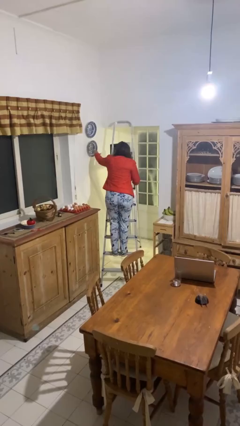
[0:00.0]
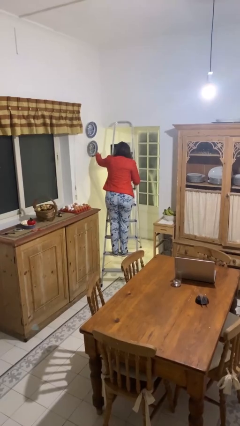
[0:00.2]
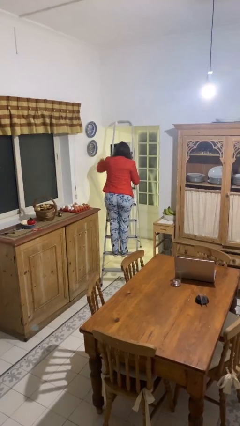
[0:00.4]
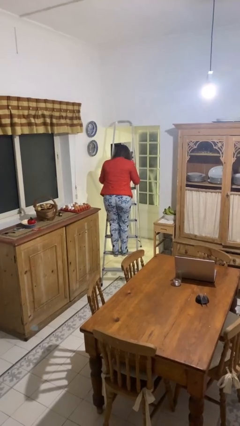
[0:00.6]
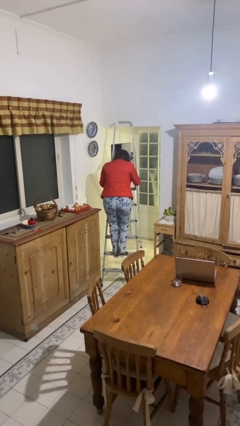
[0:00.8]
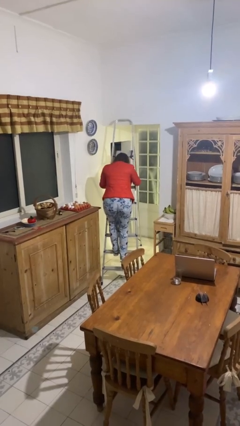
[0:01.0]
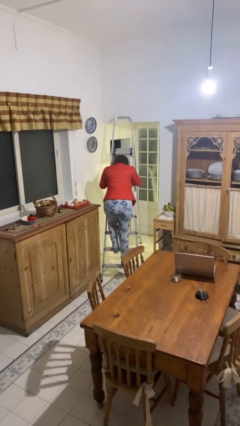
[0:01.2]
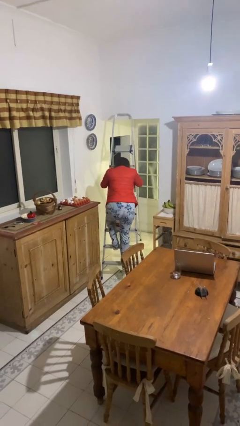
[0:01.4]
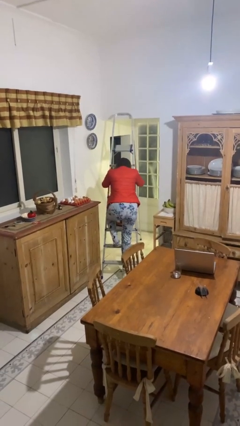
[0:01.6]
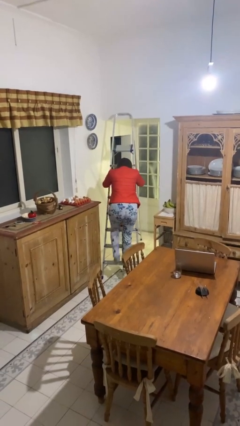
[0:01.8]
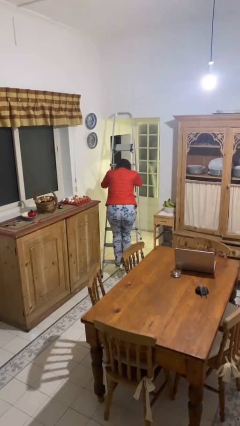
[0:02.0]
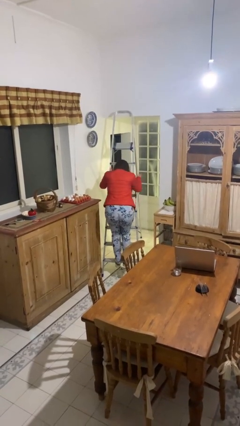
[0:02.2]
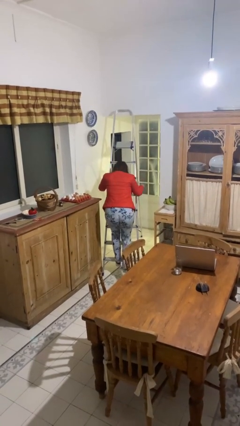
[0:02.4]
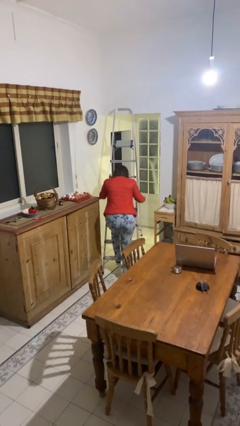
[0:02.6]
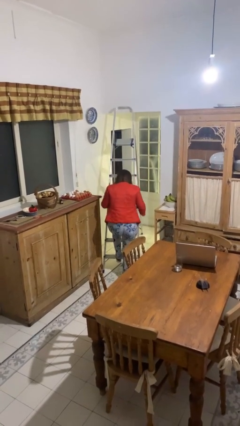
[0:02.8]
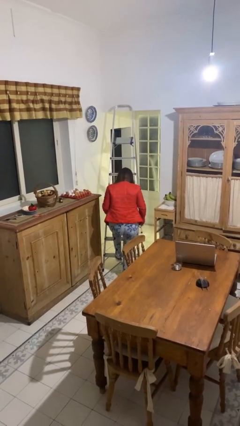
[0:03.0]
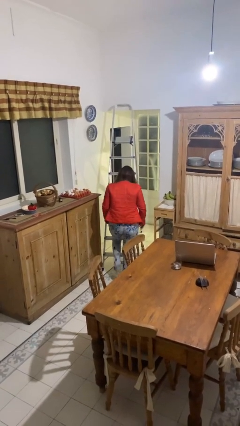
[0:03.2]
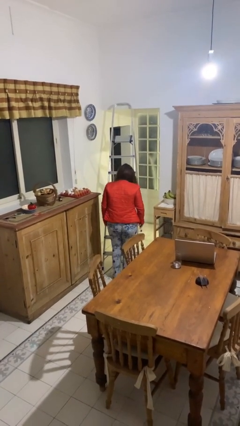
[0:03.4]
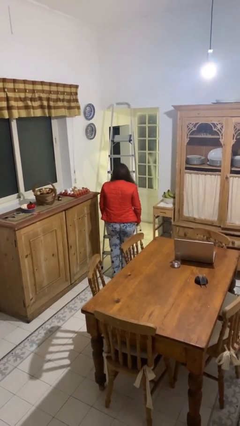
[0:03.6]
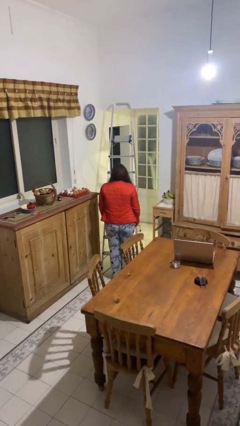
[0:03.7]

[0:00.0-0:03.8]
person climbs down ladder

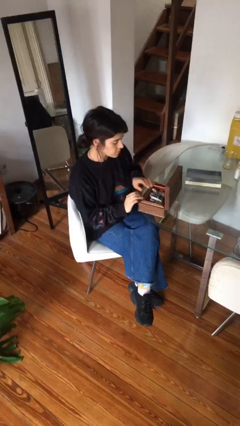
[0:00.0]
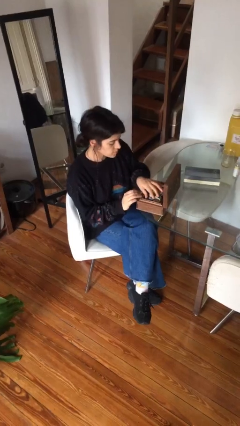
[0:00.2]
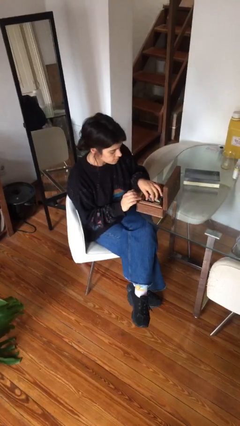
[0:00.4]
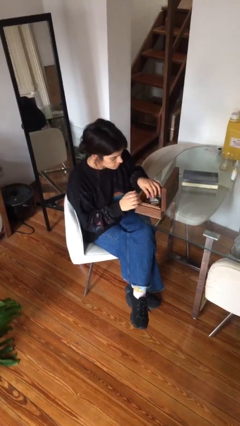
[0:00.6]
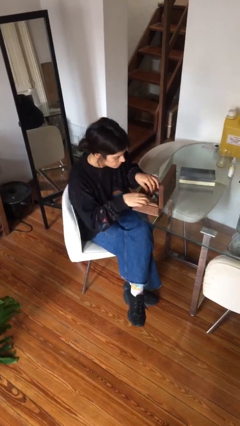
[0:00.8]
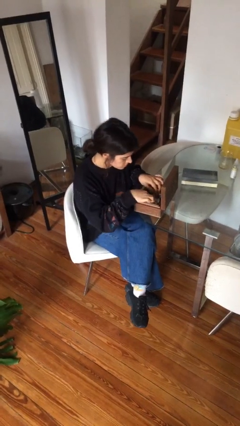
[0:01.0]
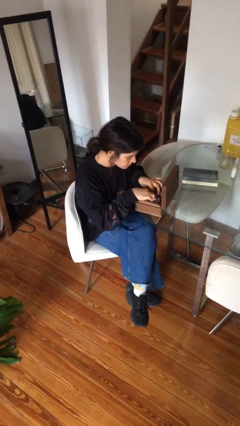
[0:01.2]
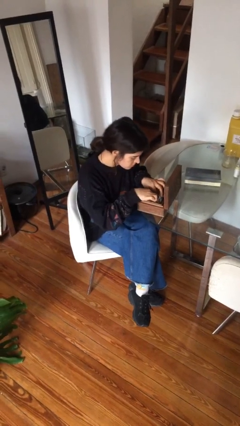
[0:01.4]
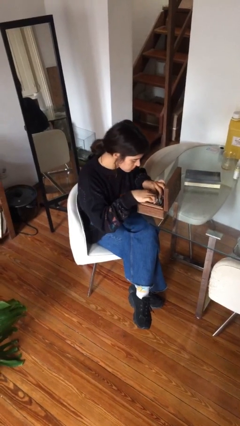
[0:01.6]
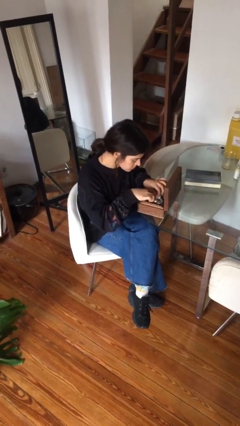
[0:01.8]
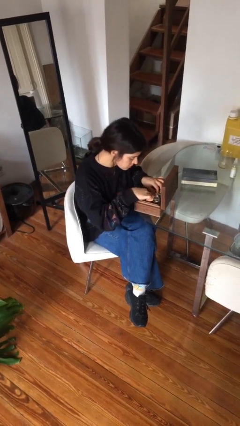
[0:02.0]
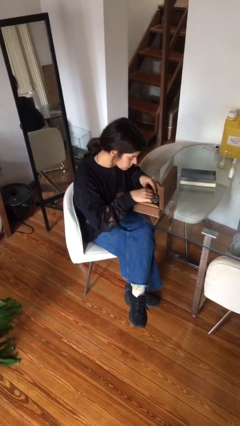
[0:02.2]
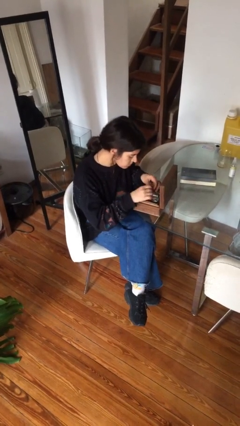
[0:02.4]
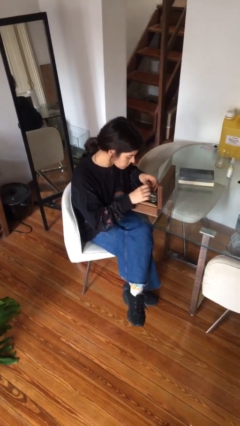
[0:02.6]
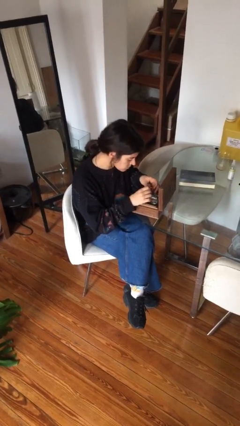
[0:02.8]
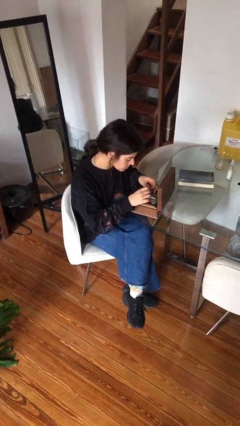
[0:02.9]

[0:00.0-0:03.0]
person searches jewelry box

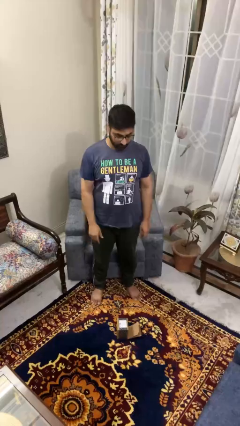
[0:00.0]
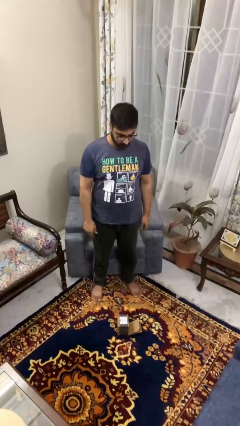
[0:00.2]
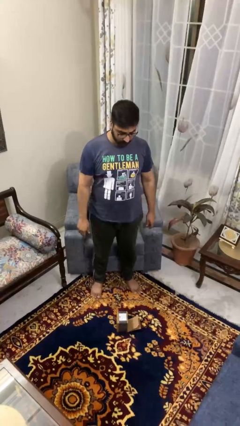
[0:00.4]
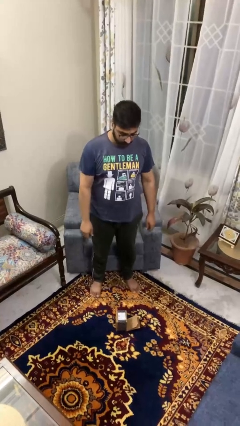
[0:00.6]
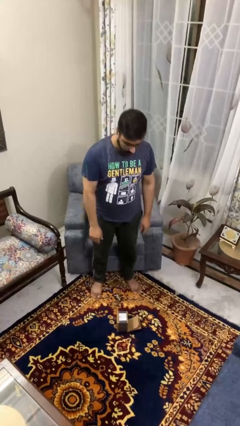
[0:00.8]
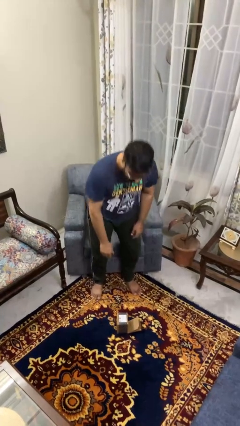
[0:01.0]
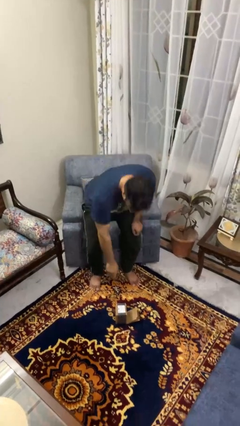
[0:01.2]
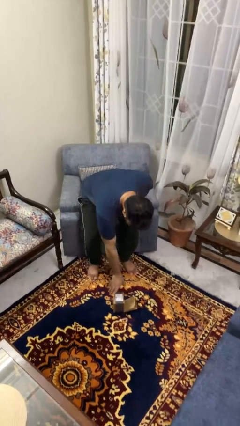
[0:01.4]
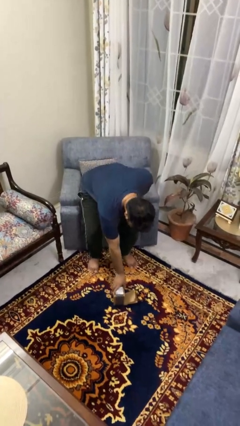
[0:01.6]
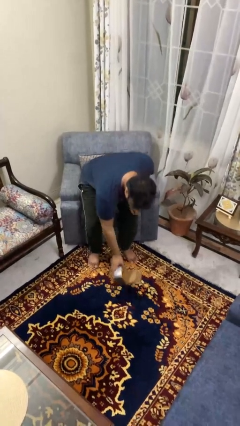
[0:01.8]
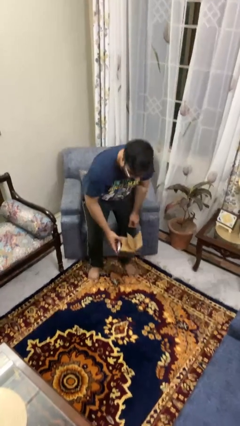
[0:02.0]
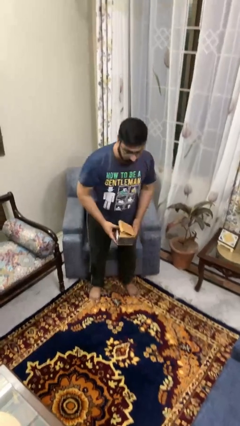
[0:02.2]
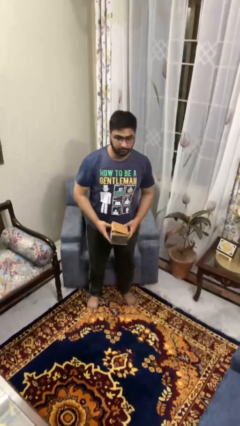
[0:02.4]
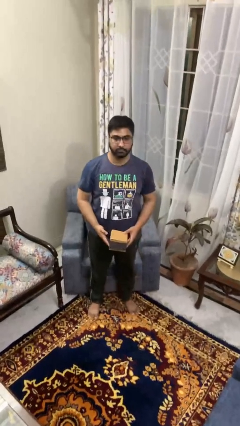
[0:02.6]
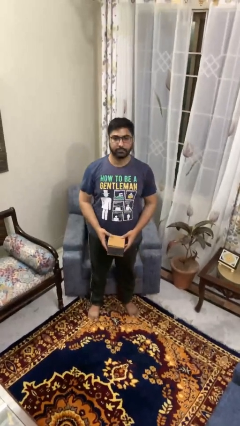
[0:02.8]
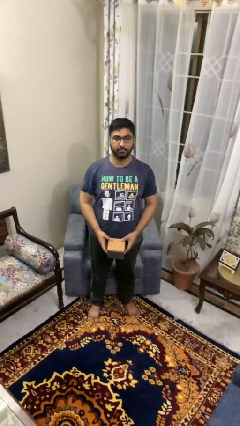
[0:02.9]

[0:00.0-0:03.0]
person picks up object from floor

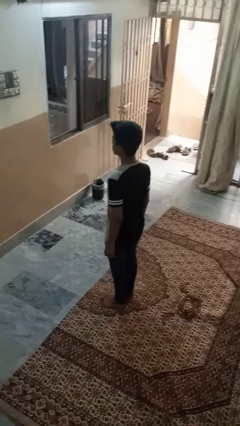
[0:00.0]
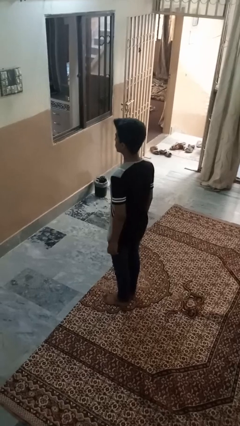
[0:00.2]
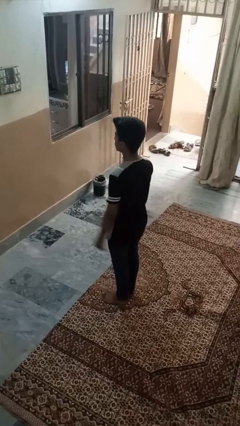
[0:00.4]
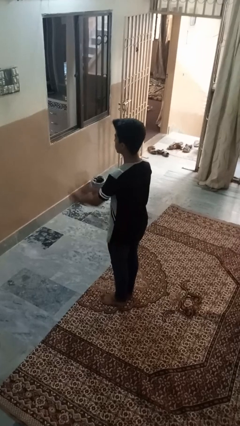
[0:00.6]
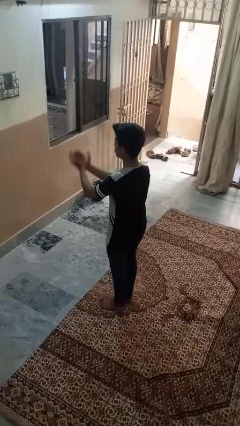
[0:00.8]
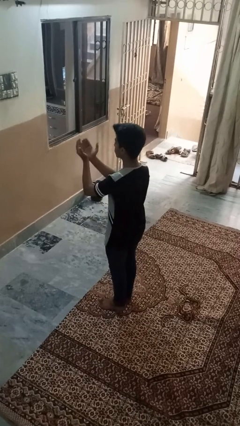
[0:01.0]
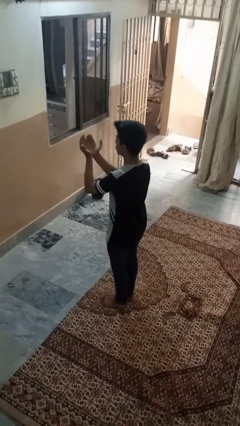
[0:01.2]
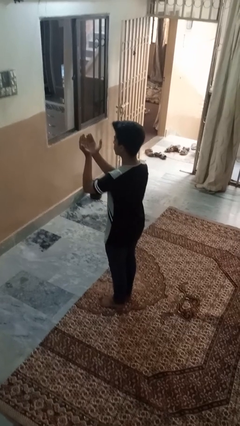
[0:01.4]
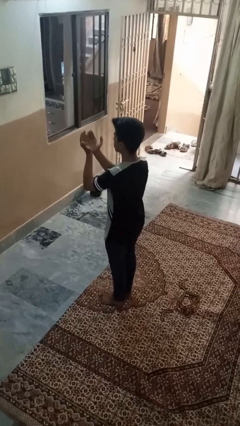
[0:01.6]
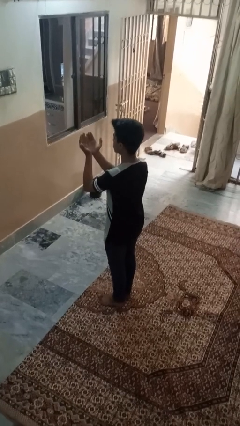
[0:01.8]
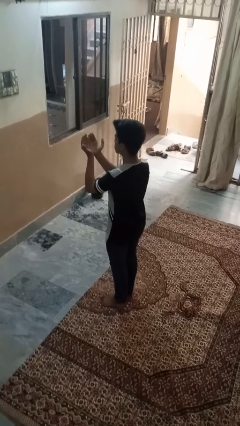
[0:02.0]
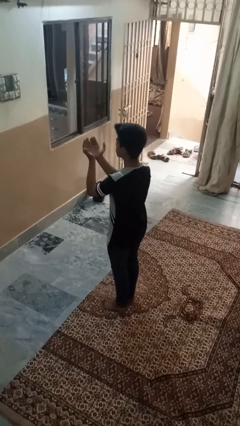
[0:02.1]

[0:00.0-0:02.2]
person prays

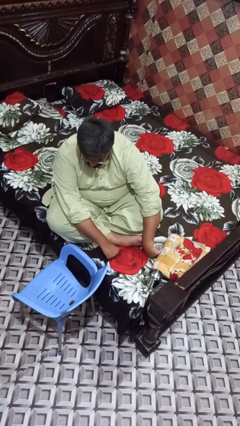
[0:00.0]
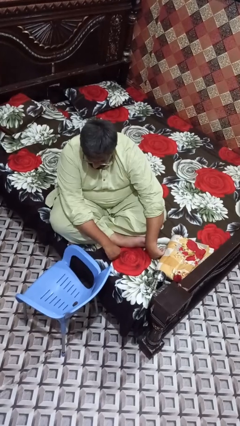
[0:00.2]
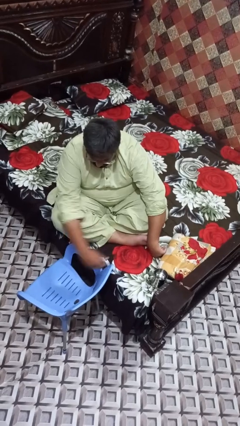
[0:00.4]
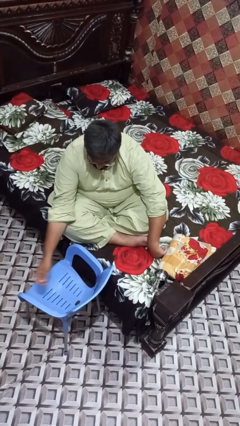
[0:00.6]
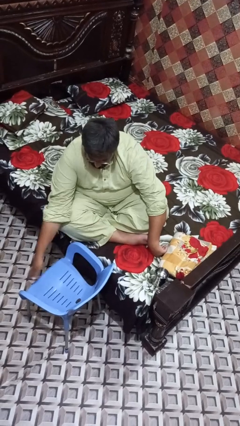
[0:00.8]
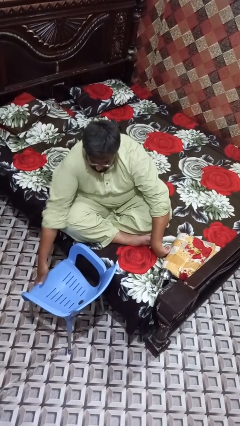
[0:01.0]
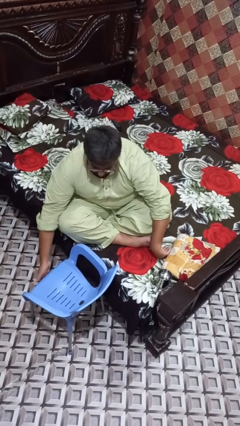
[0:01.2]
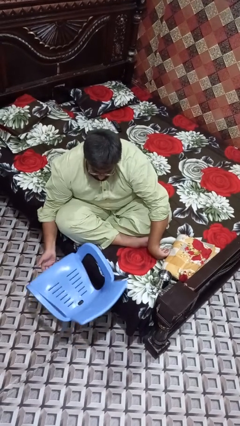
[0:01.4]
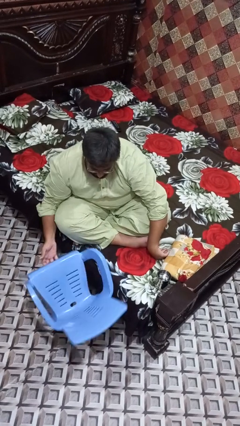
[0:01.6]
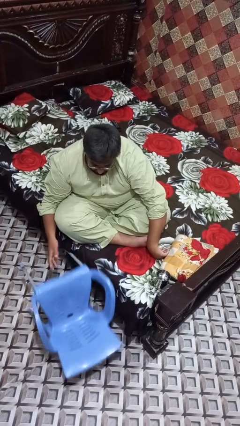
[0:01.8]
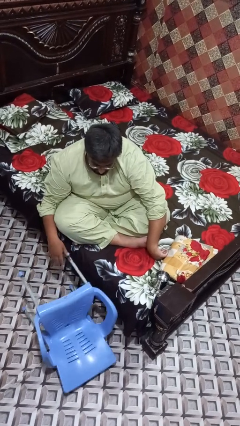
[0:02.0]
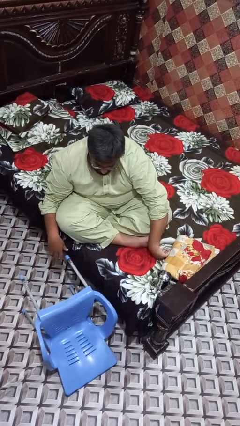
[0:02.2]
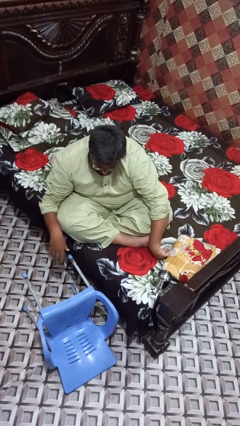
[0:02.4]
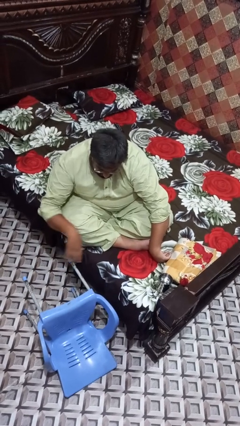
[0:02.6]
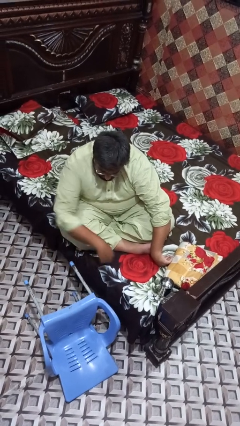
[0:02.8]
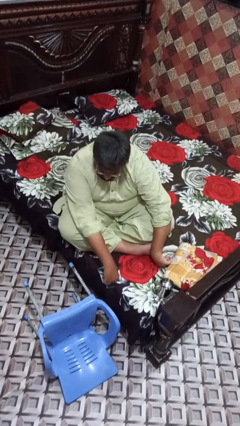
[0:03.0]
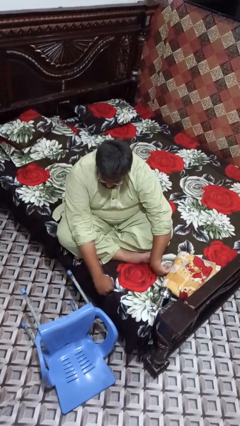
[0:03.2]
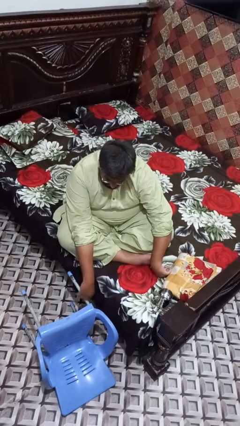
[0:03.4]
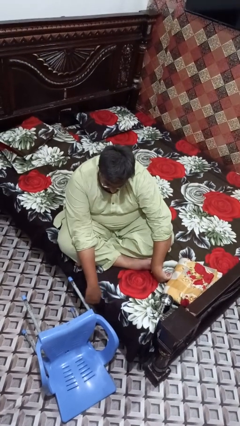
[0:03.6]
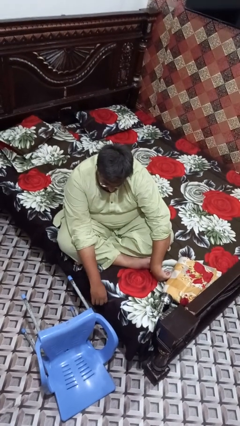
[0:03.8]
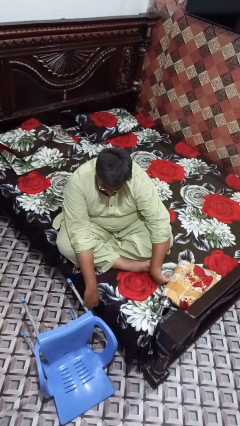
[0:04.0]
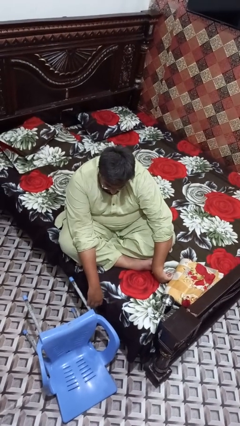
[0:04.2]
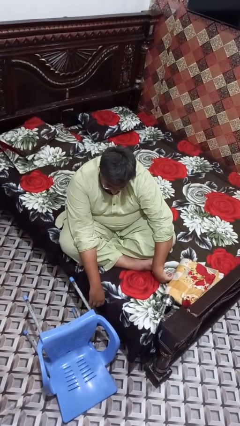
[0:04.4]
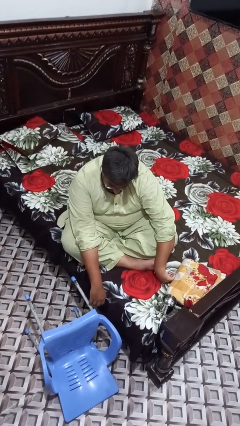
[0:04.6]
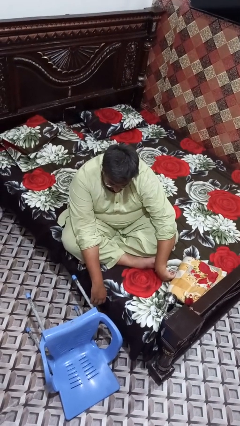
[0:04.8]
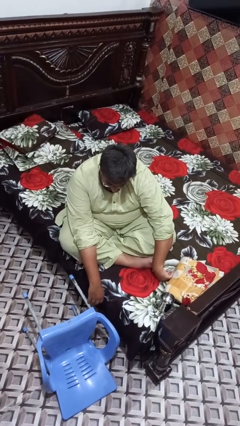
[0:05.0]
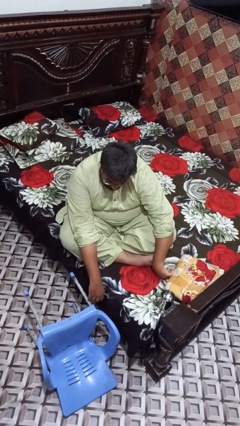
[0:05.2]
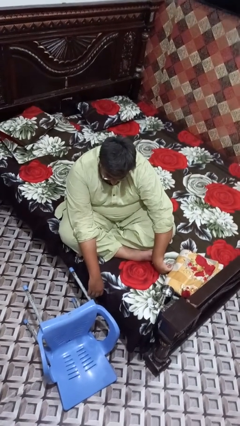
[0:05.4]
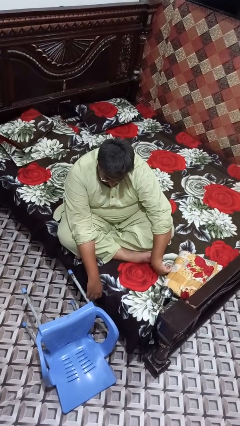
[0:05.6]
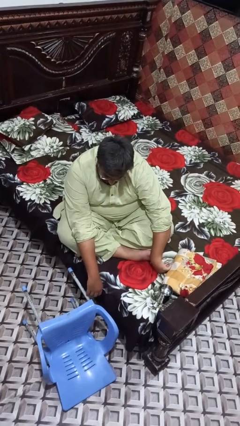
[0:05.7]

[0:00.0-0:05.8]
person knocks over furniture
